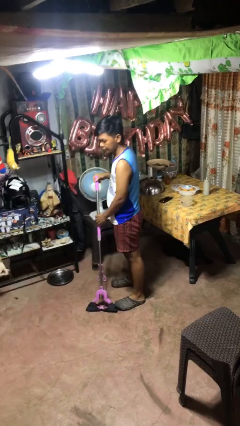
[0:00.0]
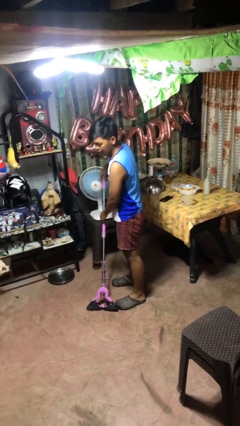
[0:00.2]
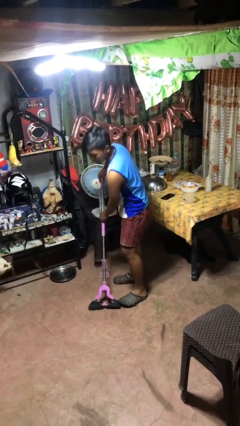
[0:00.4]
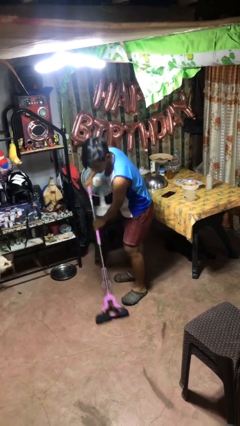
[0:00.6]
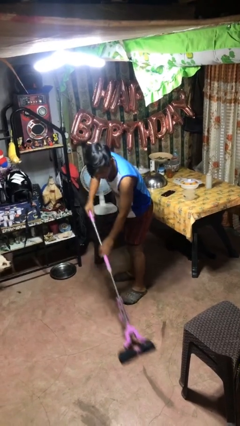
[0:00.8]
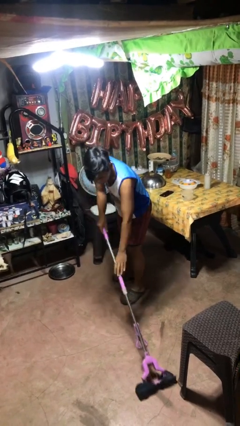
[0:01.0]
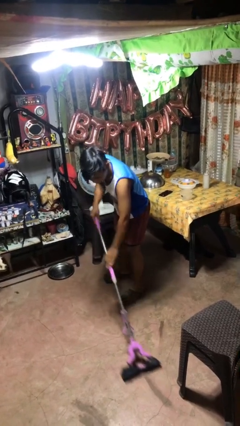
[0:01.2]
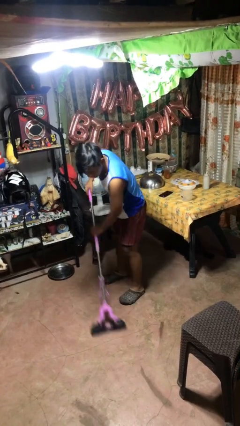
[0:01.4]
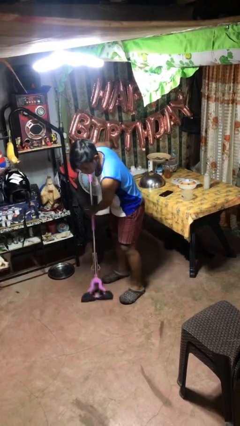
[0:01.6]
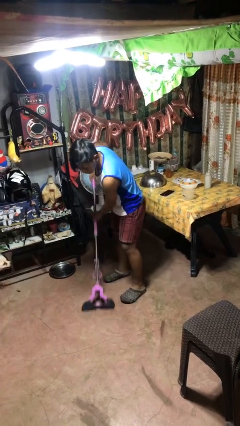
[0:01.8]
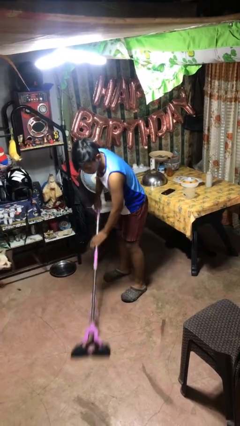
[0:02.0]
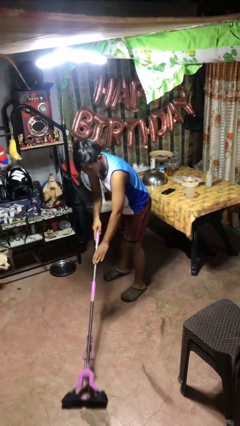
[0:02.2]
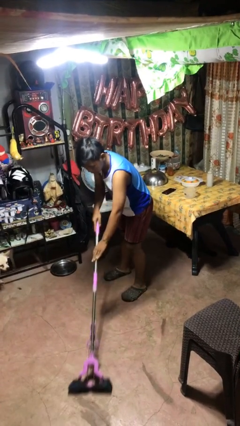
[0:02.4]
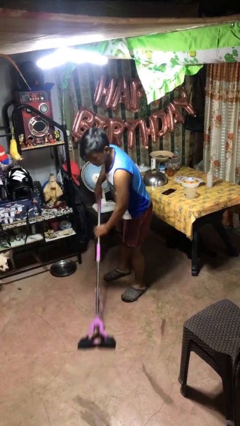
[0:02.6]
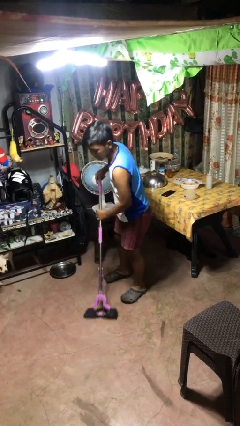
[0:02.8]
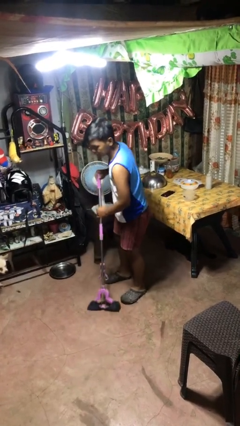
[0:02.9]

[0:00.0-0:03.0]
person mops

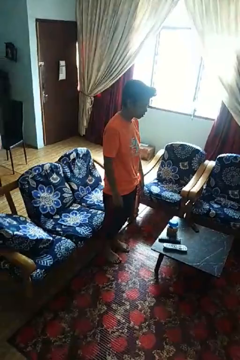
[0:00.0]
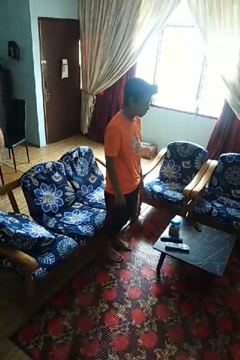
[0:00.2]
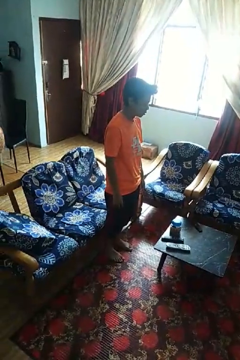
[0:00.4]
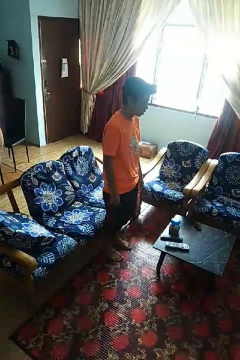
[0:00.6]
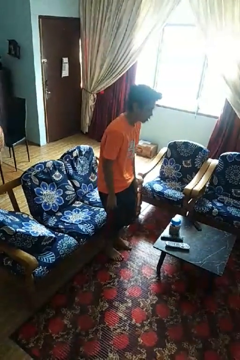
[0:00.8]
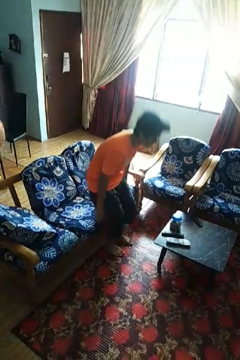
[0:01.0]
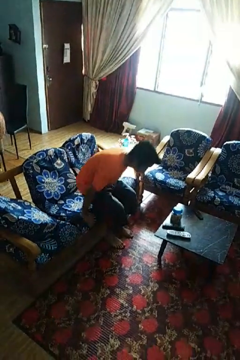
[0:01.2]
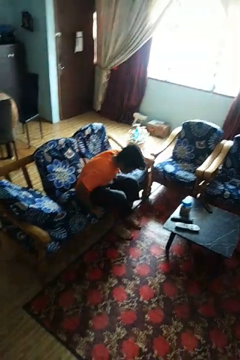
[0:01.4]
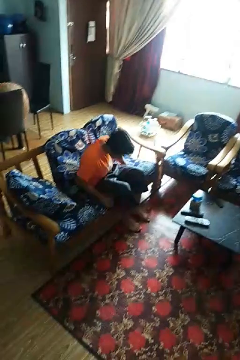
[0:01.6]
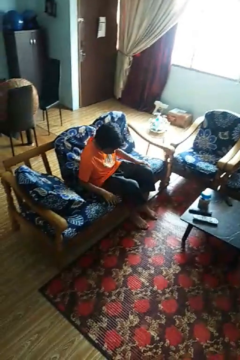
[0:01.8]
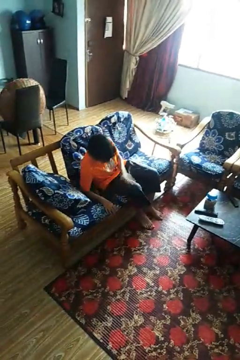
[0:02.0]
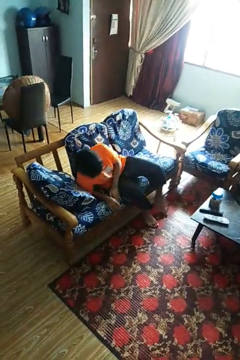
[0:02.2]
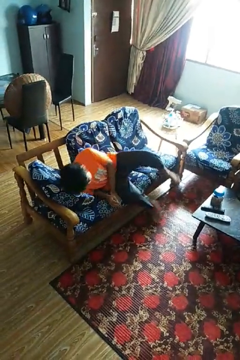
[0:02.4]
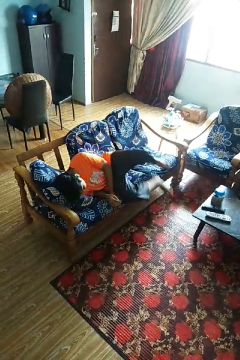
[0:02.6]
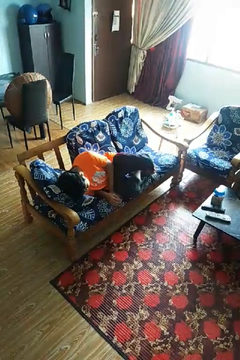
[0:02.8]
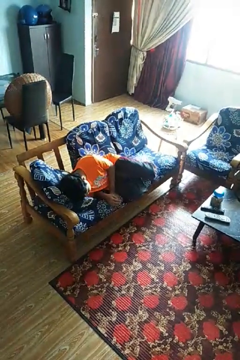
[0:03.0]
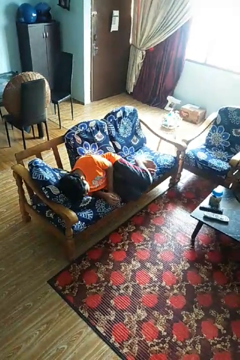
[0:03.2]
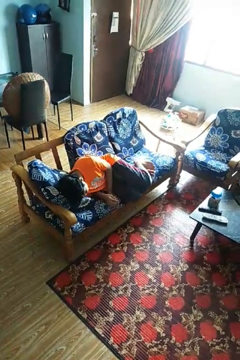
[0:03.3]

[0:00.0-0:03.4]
person lies down on couch

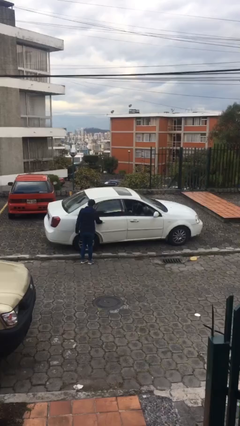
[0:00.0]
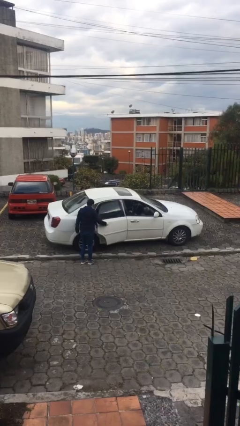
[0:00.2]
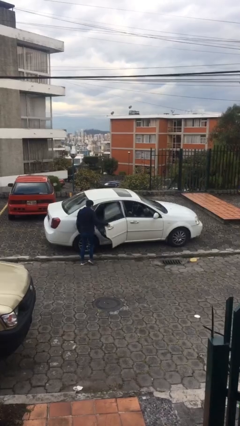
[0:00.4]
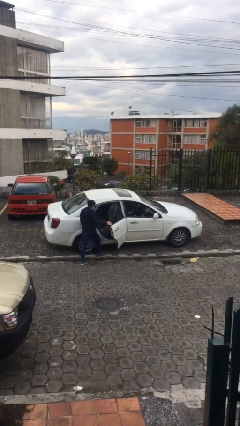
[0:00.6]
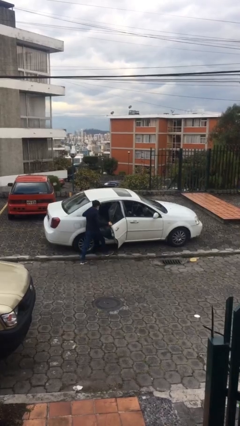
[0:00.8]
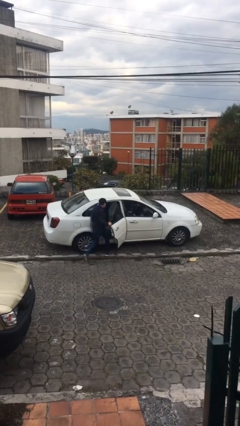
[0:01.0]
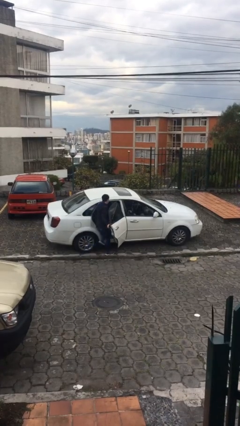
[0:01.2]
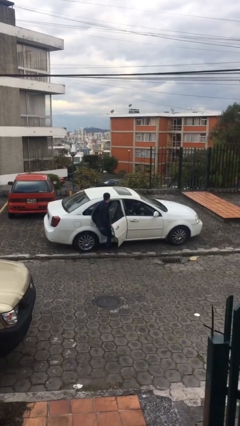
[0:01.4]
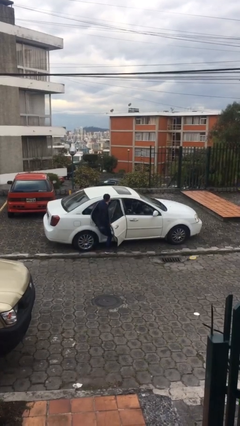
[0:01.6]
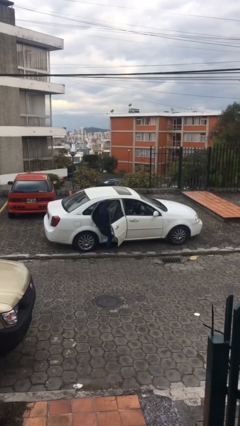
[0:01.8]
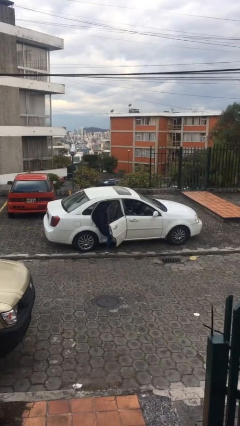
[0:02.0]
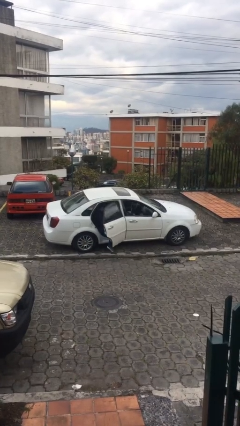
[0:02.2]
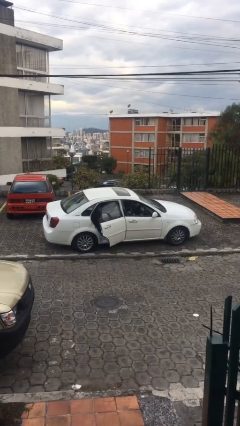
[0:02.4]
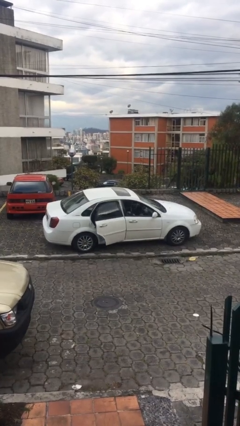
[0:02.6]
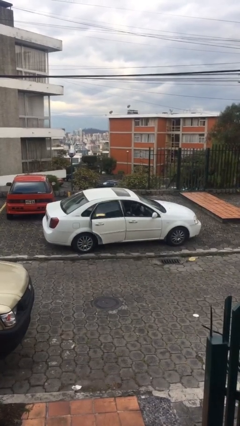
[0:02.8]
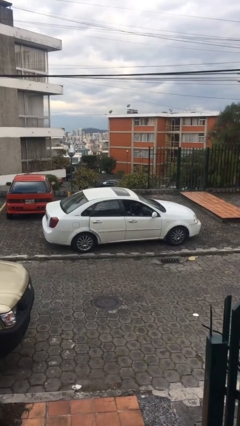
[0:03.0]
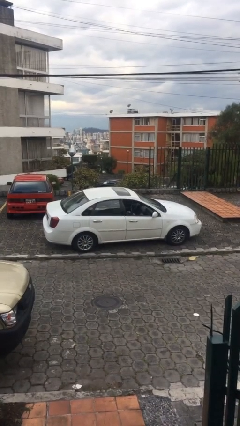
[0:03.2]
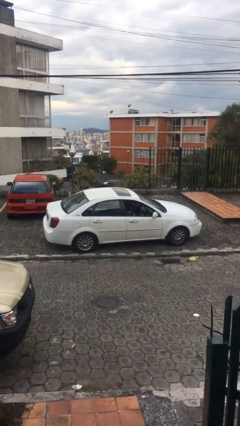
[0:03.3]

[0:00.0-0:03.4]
car picks up person

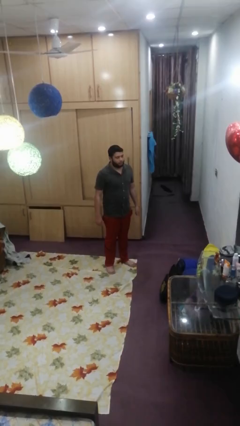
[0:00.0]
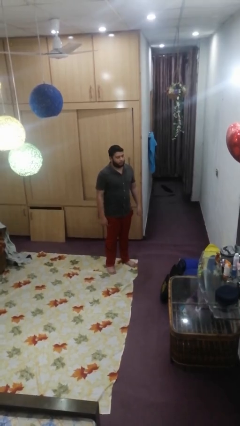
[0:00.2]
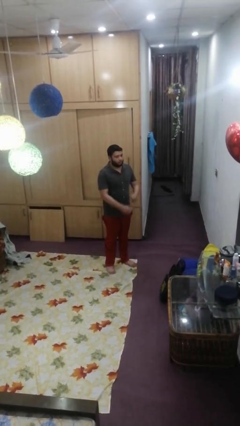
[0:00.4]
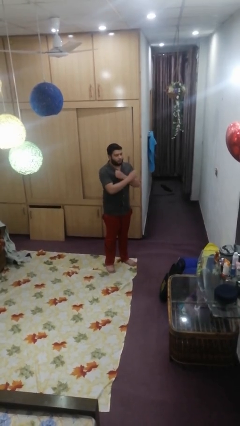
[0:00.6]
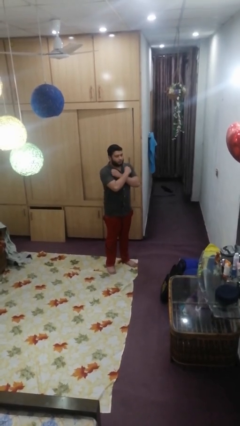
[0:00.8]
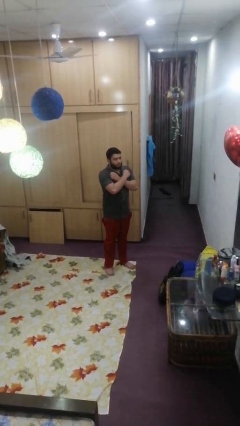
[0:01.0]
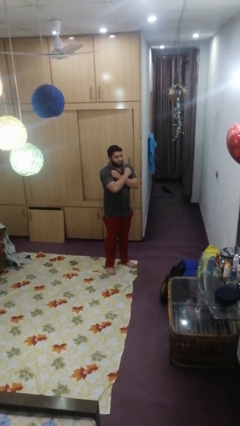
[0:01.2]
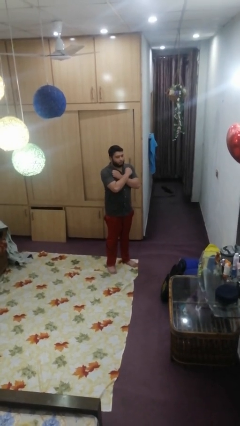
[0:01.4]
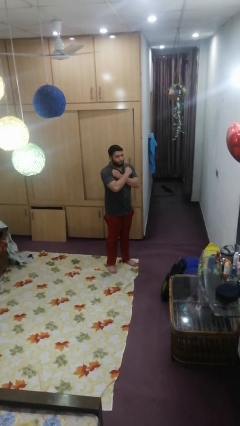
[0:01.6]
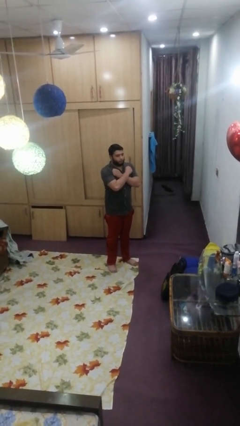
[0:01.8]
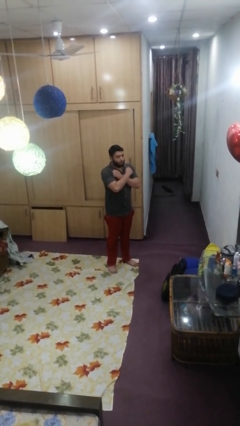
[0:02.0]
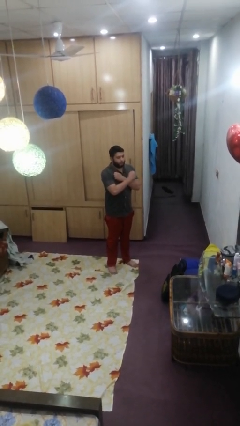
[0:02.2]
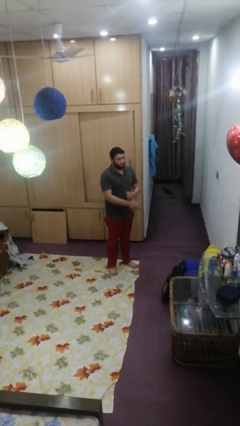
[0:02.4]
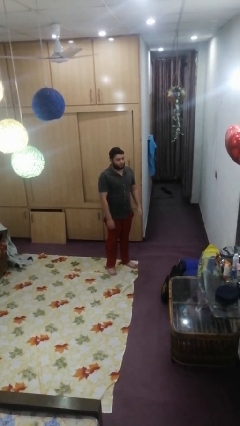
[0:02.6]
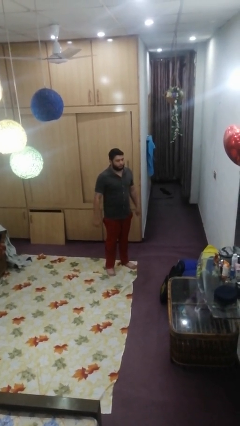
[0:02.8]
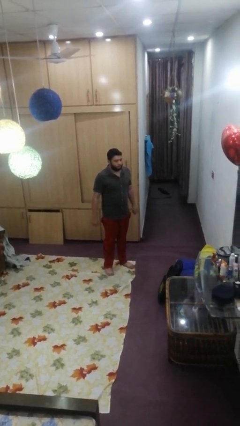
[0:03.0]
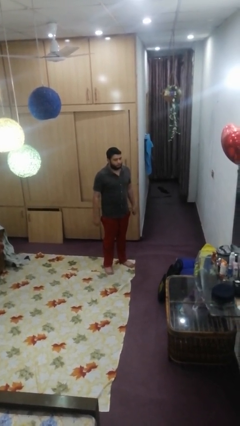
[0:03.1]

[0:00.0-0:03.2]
person crosses arms

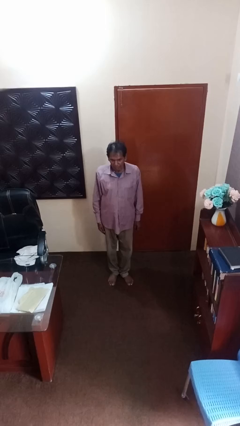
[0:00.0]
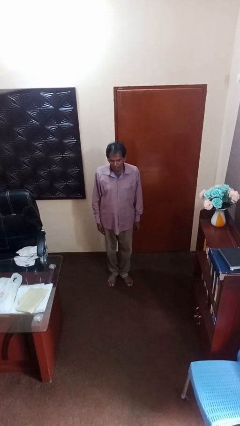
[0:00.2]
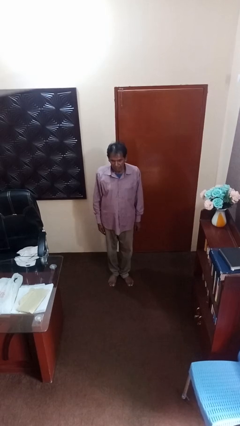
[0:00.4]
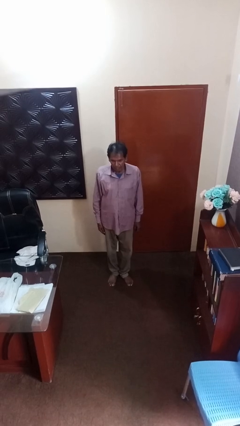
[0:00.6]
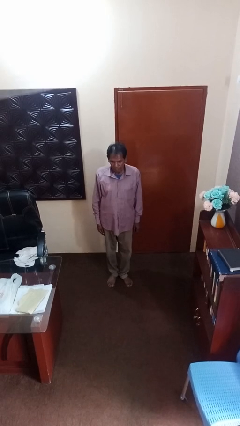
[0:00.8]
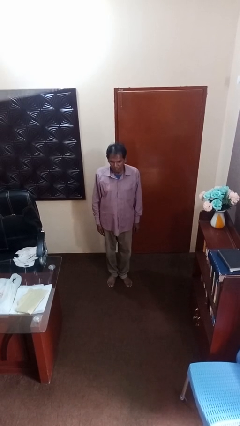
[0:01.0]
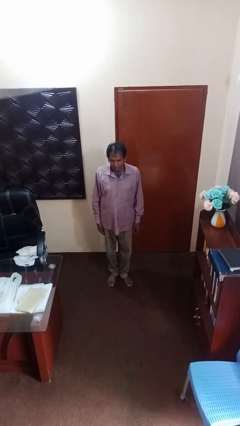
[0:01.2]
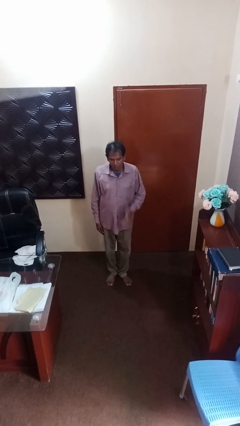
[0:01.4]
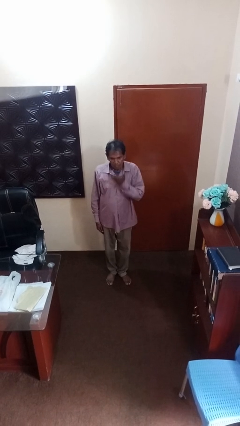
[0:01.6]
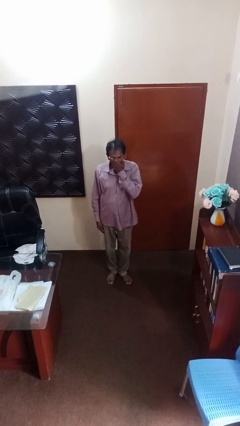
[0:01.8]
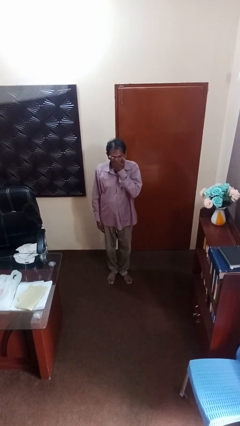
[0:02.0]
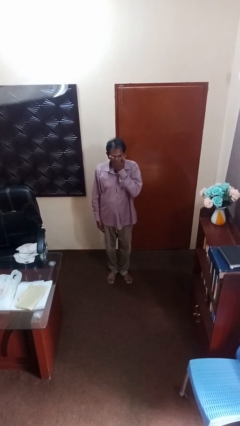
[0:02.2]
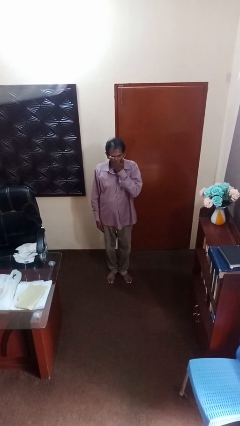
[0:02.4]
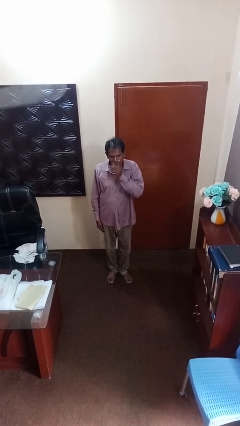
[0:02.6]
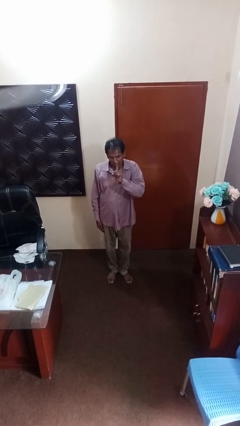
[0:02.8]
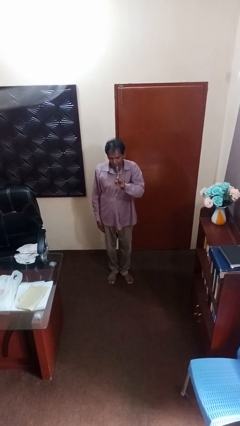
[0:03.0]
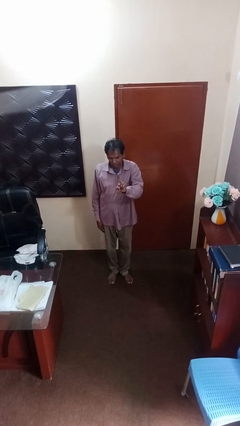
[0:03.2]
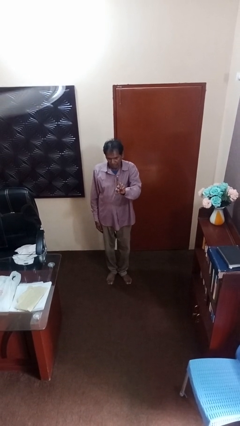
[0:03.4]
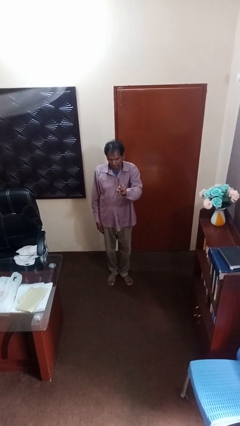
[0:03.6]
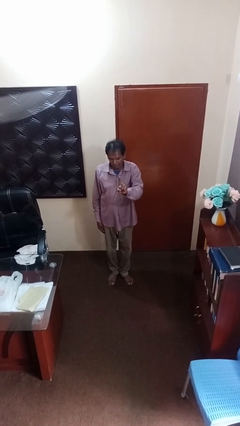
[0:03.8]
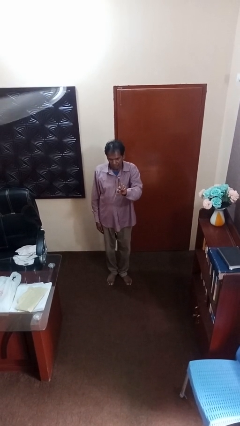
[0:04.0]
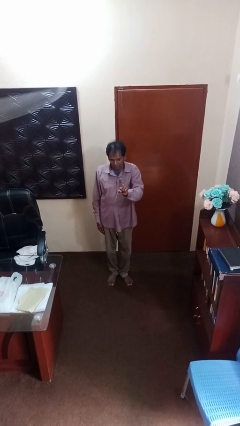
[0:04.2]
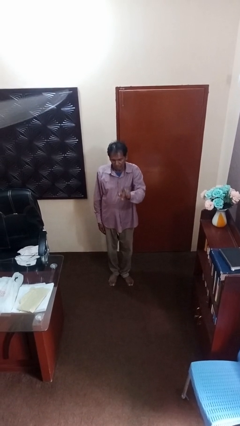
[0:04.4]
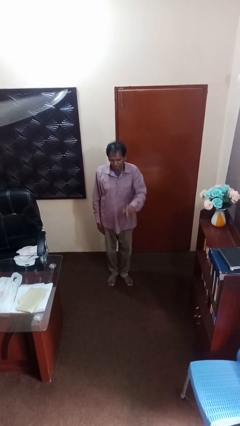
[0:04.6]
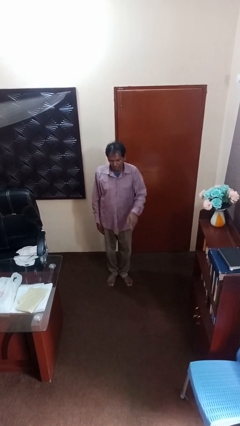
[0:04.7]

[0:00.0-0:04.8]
person gestures behind me

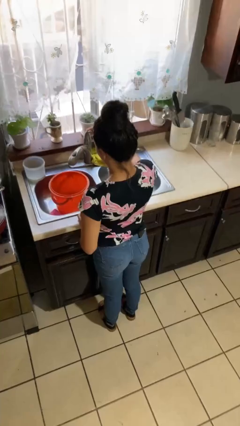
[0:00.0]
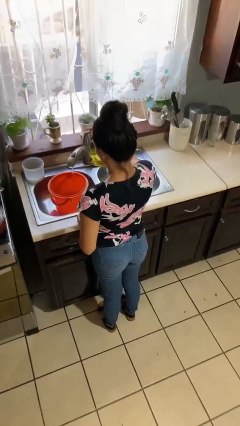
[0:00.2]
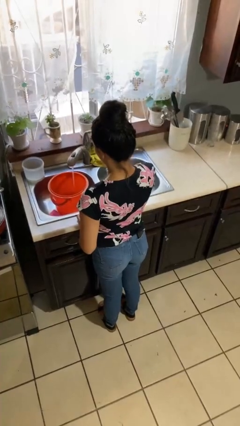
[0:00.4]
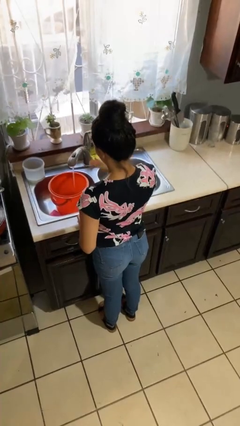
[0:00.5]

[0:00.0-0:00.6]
person turns on faucet
